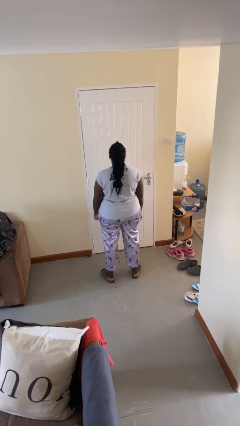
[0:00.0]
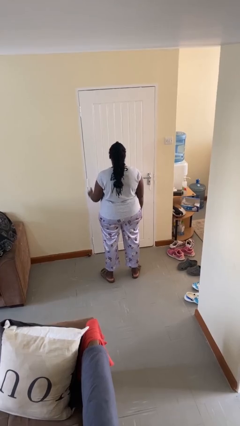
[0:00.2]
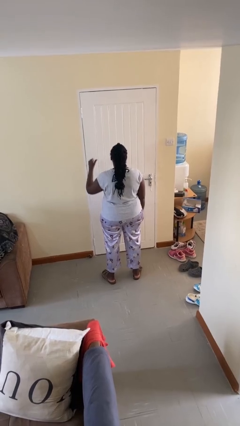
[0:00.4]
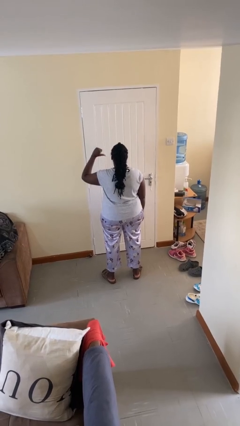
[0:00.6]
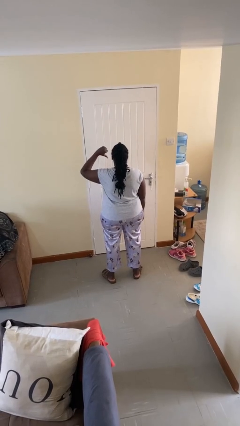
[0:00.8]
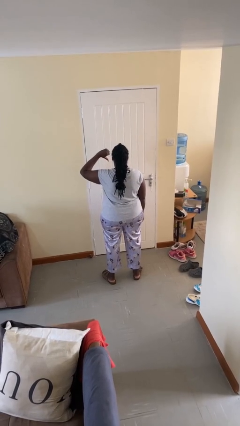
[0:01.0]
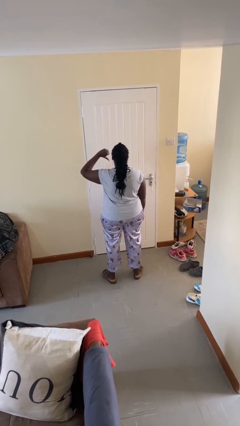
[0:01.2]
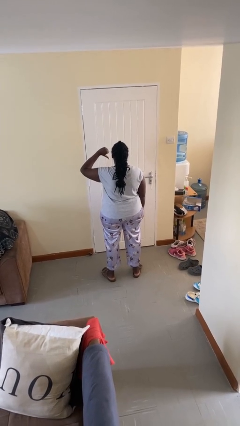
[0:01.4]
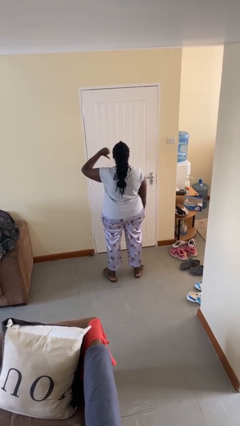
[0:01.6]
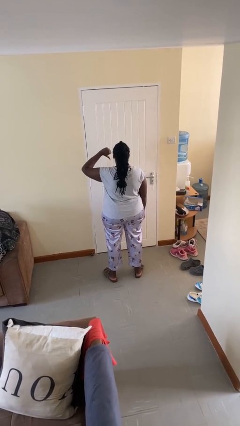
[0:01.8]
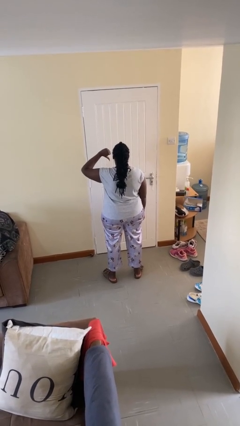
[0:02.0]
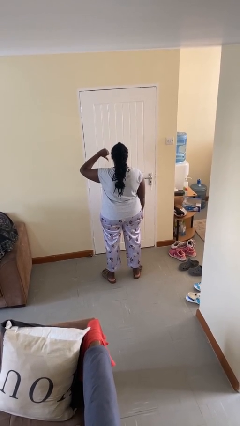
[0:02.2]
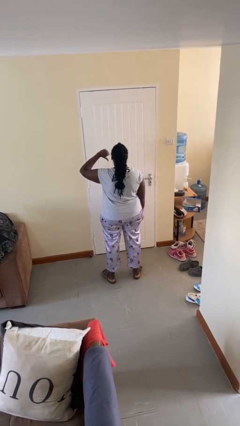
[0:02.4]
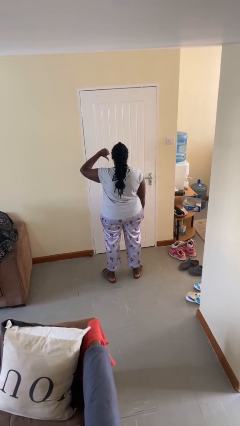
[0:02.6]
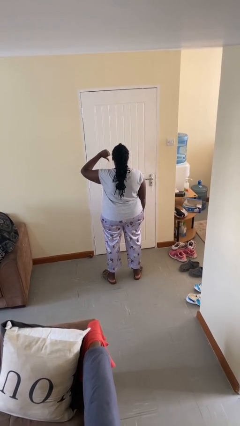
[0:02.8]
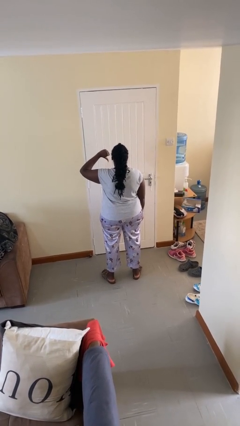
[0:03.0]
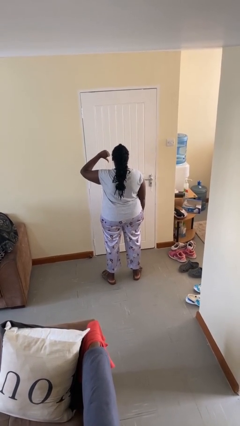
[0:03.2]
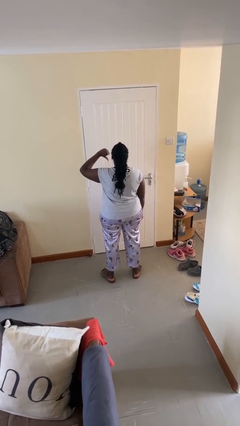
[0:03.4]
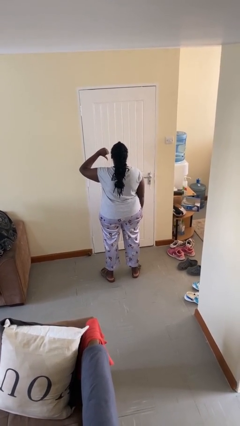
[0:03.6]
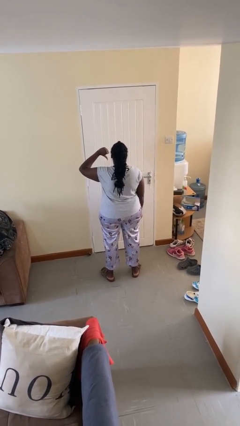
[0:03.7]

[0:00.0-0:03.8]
person gestures thumbs down

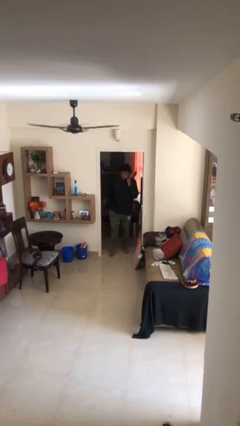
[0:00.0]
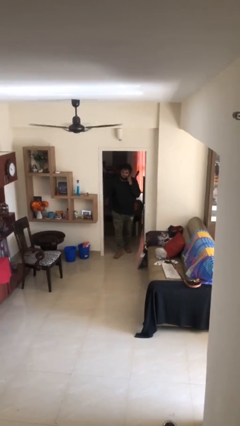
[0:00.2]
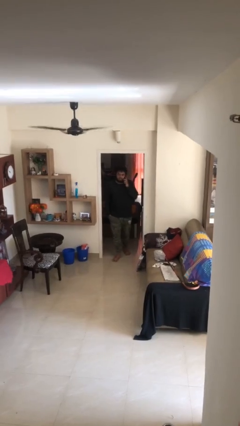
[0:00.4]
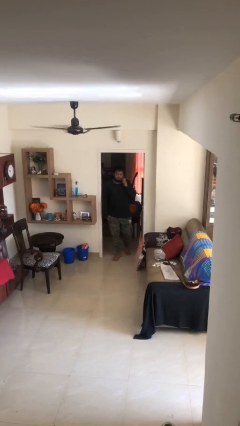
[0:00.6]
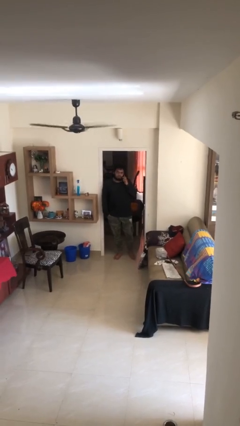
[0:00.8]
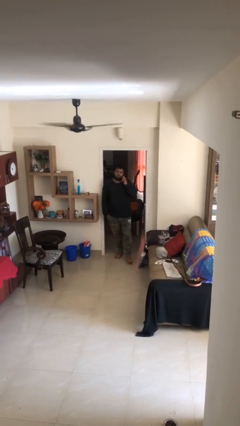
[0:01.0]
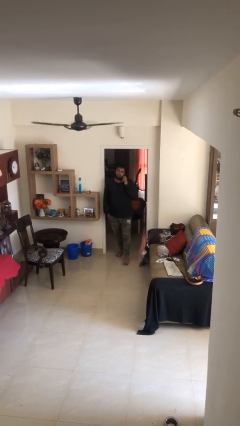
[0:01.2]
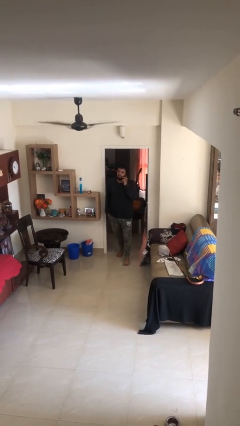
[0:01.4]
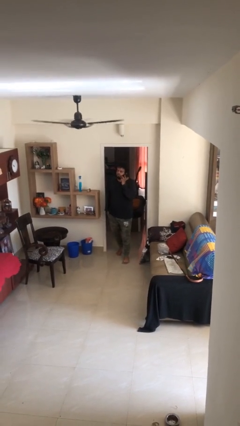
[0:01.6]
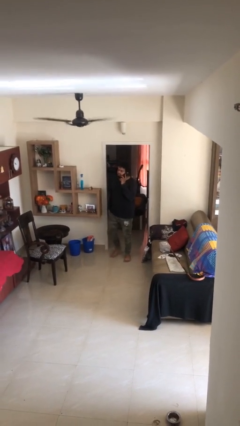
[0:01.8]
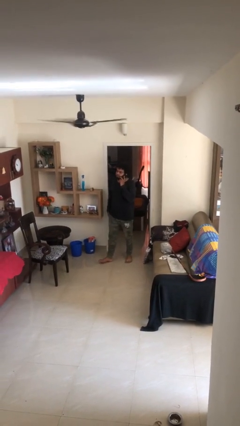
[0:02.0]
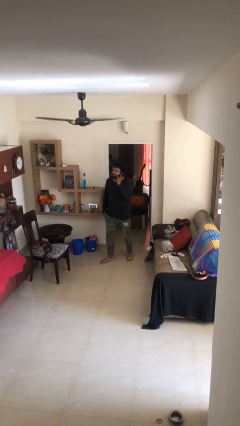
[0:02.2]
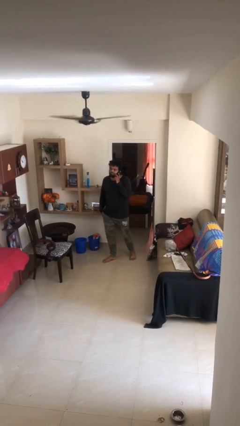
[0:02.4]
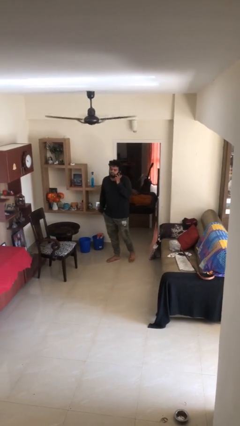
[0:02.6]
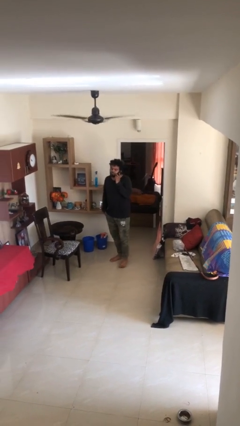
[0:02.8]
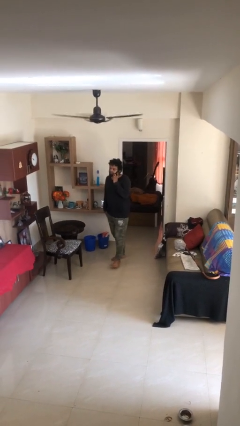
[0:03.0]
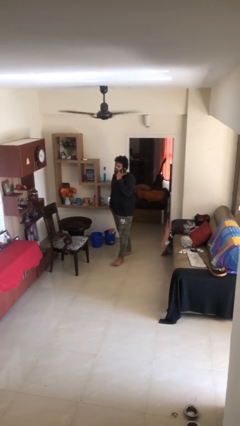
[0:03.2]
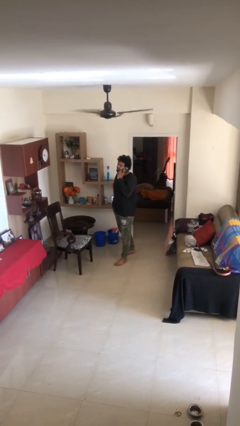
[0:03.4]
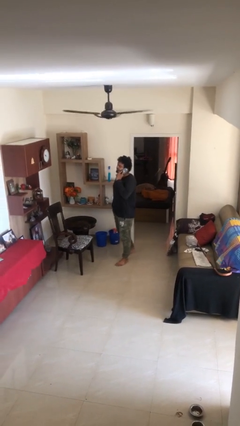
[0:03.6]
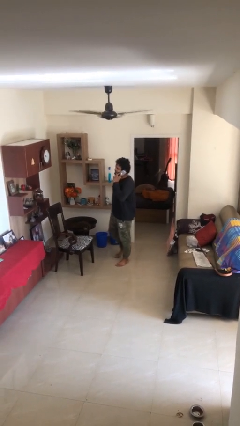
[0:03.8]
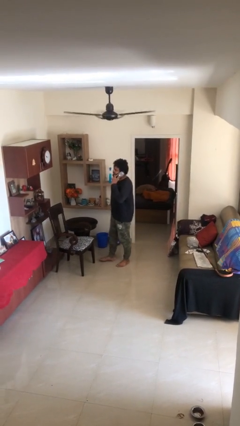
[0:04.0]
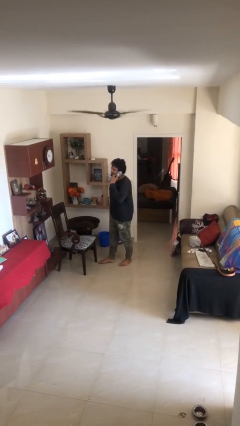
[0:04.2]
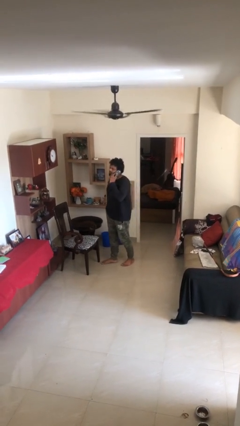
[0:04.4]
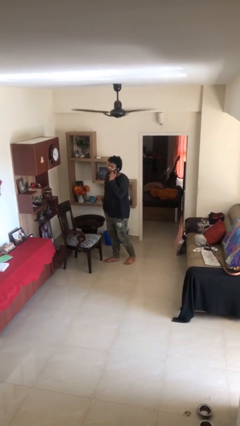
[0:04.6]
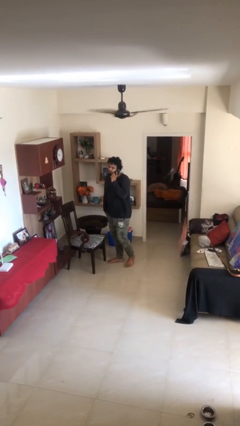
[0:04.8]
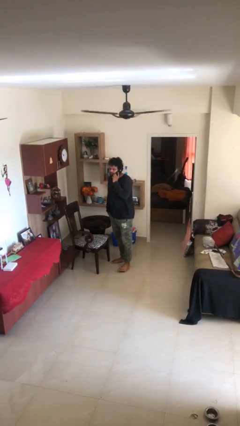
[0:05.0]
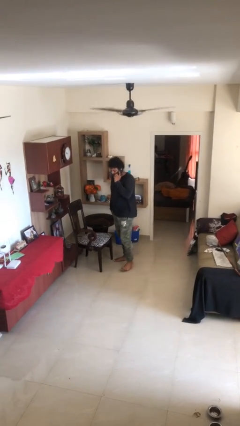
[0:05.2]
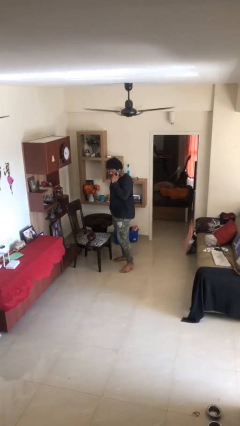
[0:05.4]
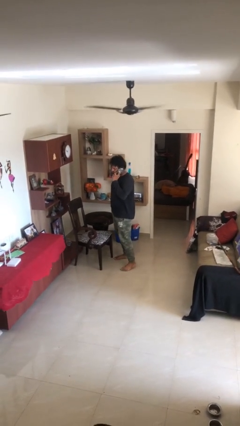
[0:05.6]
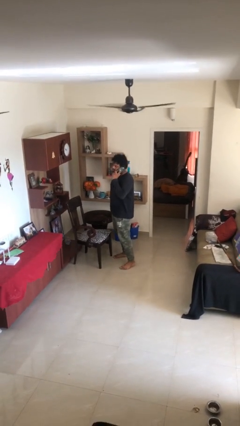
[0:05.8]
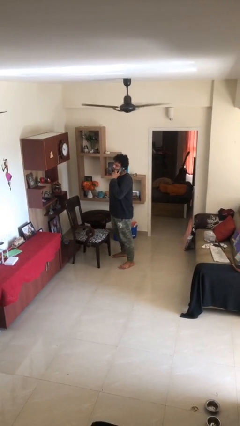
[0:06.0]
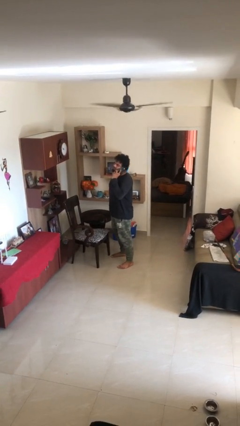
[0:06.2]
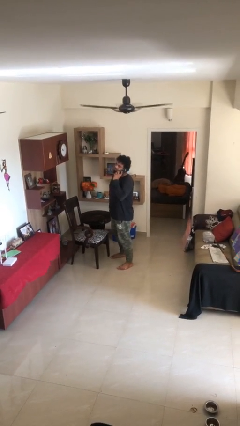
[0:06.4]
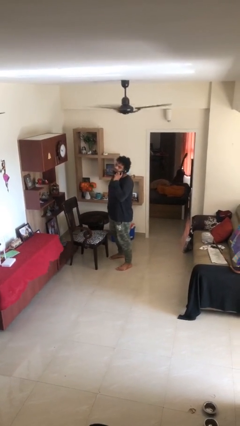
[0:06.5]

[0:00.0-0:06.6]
person enters scene through structure

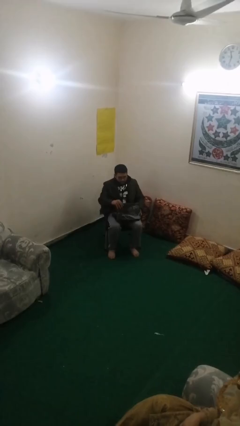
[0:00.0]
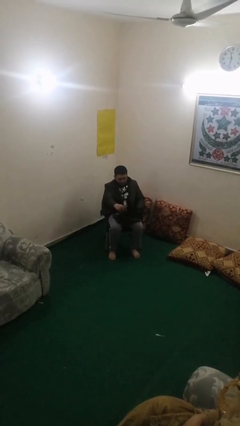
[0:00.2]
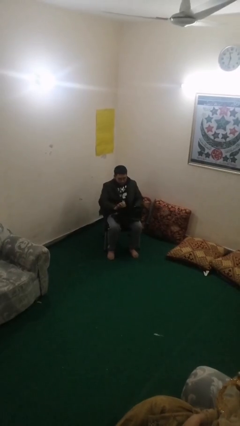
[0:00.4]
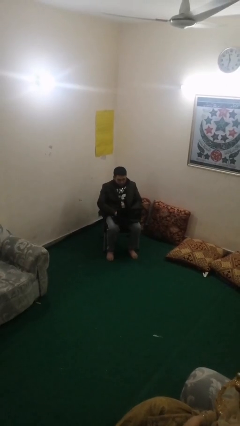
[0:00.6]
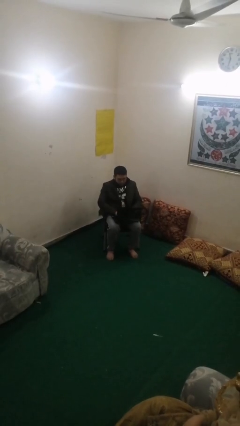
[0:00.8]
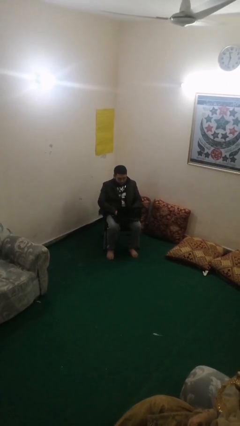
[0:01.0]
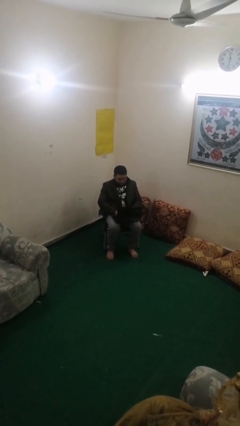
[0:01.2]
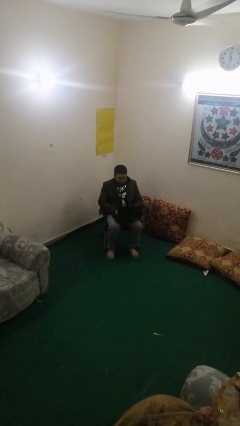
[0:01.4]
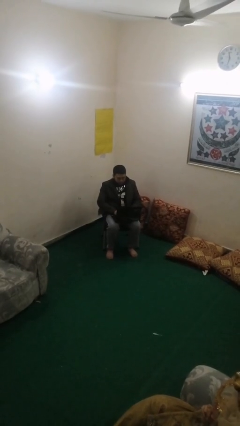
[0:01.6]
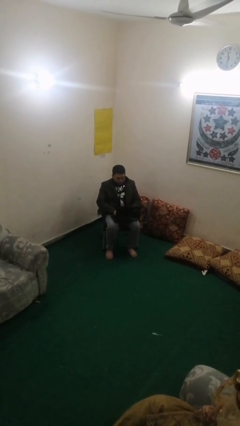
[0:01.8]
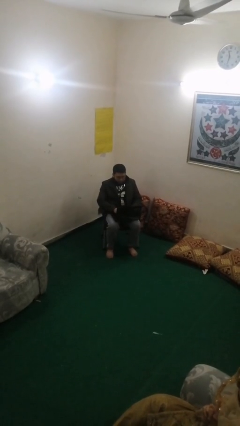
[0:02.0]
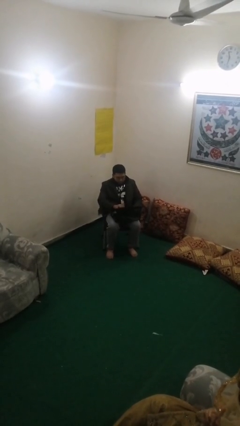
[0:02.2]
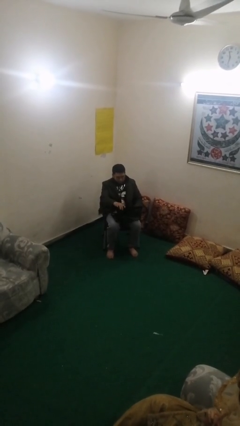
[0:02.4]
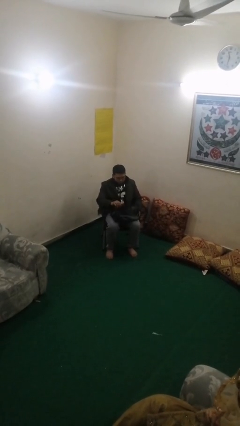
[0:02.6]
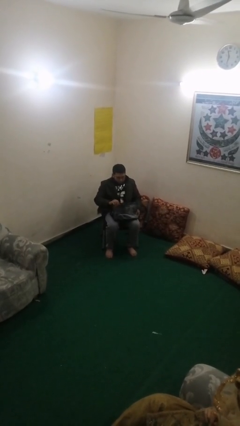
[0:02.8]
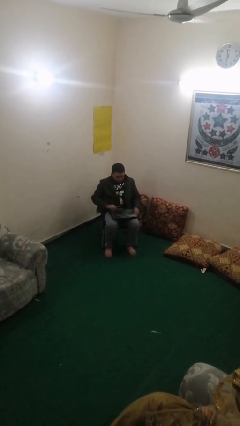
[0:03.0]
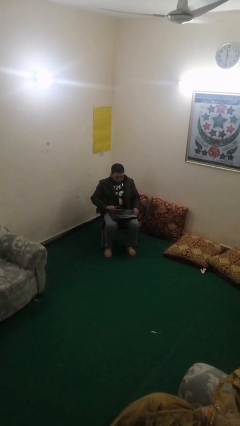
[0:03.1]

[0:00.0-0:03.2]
person interacts with laptop

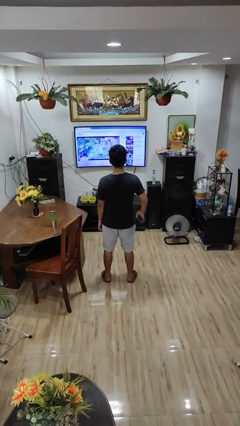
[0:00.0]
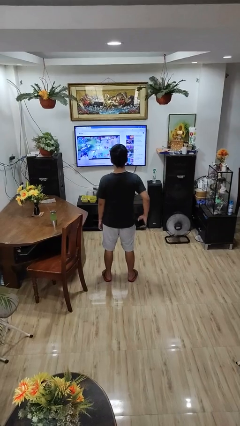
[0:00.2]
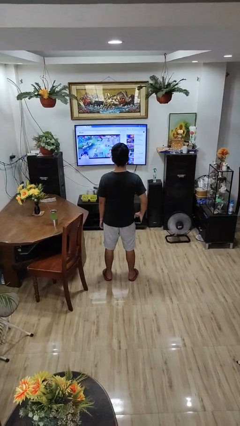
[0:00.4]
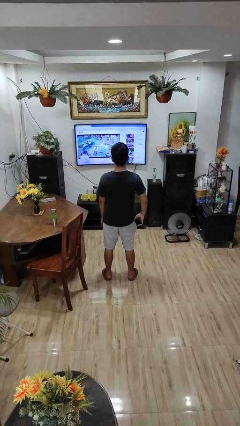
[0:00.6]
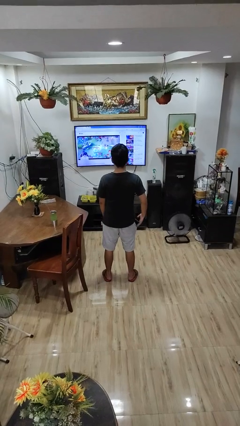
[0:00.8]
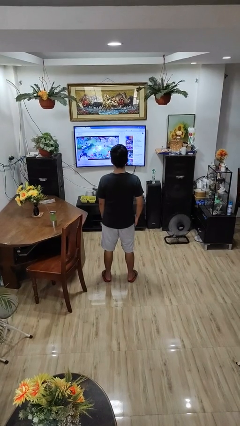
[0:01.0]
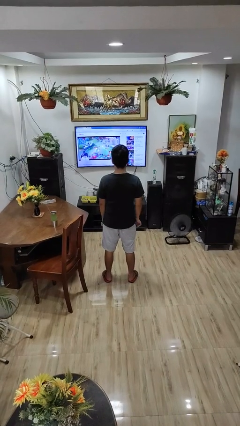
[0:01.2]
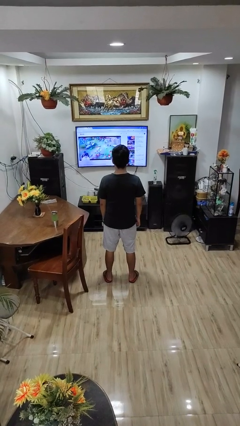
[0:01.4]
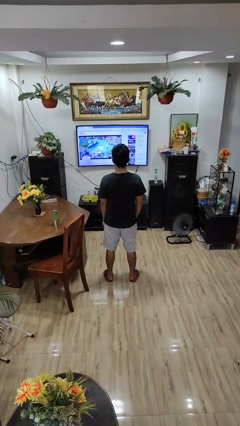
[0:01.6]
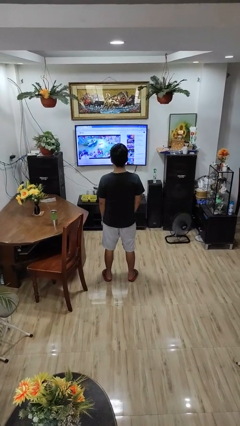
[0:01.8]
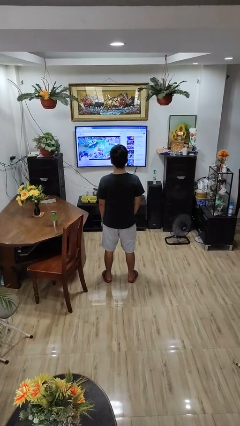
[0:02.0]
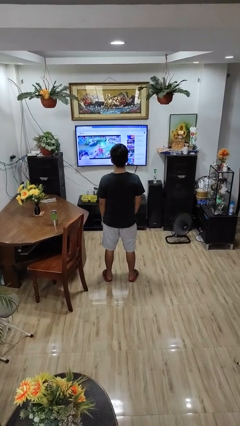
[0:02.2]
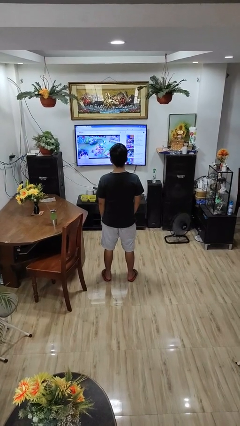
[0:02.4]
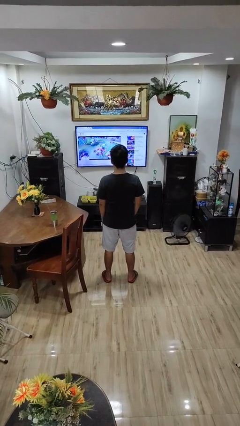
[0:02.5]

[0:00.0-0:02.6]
person puts phone into pocket

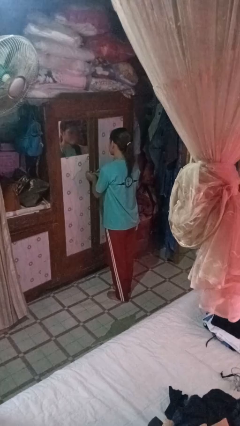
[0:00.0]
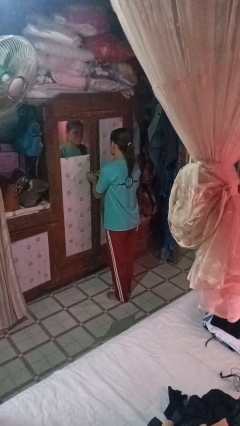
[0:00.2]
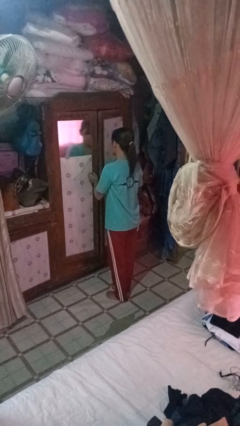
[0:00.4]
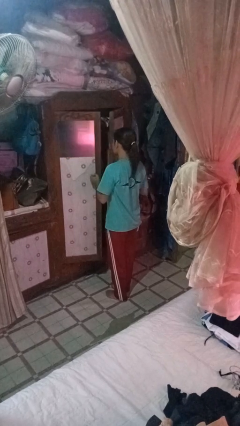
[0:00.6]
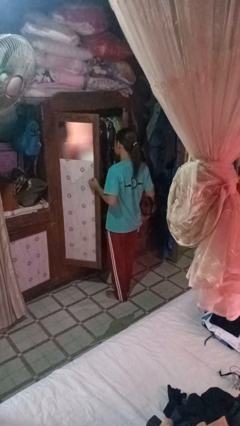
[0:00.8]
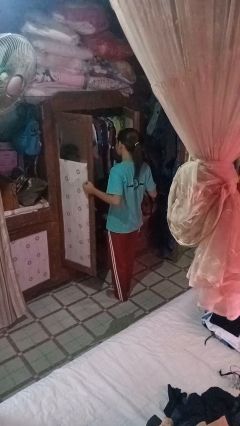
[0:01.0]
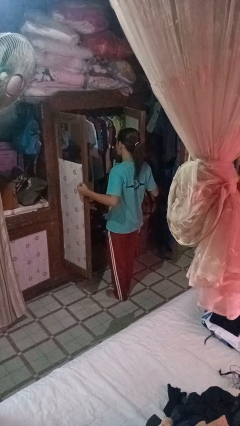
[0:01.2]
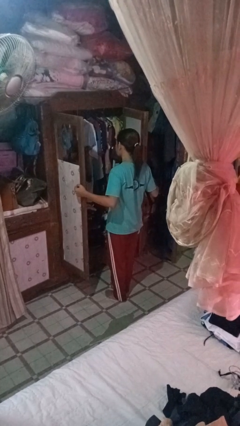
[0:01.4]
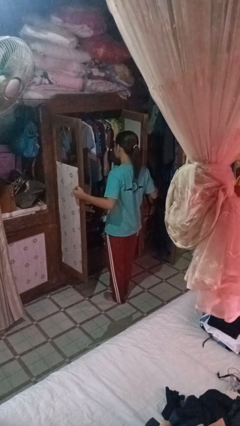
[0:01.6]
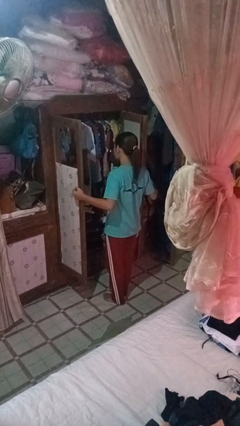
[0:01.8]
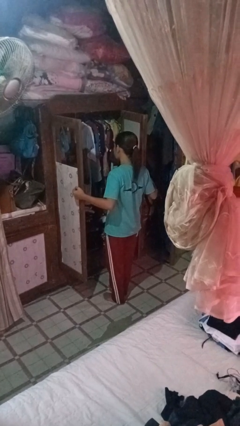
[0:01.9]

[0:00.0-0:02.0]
person opens closet door
